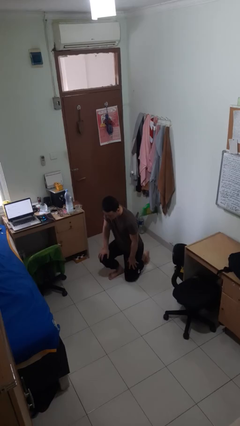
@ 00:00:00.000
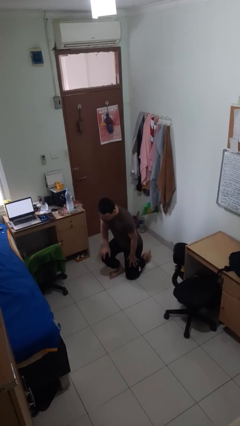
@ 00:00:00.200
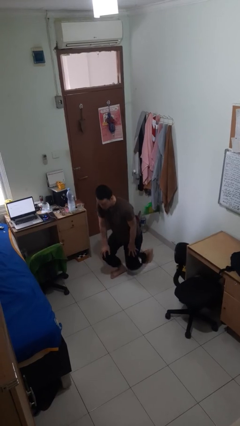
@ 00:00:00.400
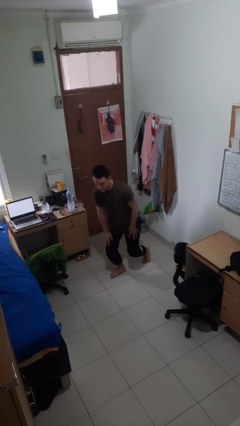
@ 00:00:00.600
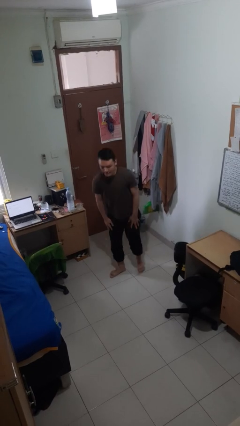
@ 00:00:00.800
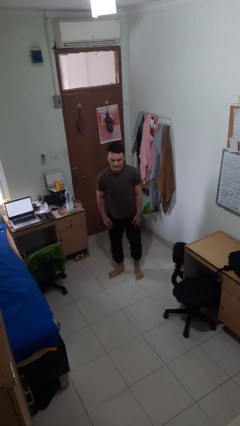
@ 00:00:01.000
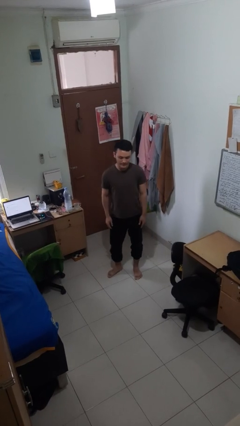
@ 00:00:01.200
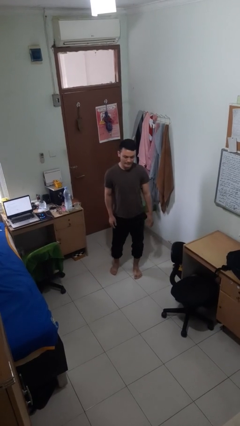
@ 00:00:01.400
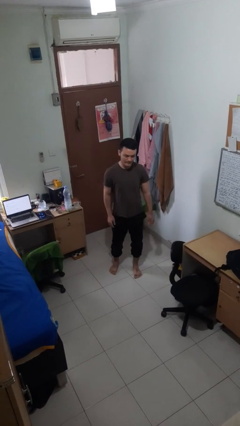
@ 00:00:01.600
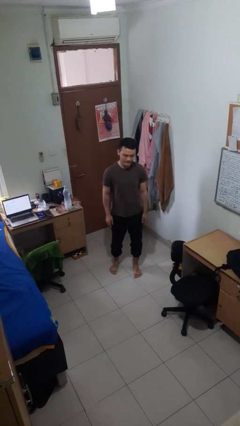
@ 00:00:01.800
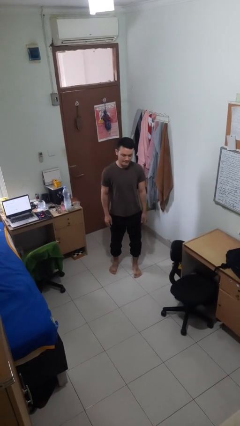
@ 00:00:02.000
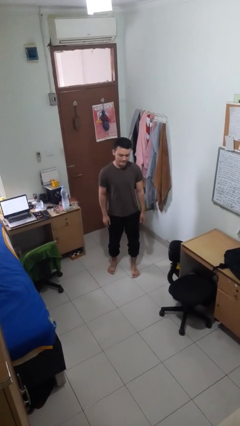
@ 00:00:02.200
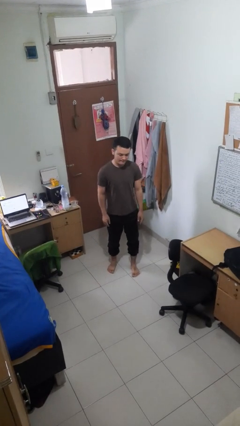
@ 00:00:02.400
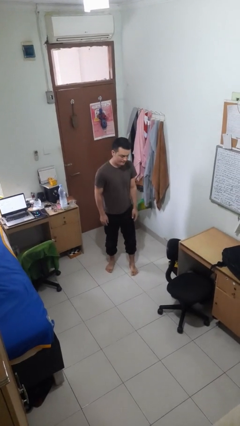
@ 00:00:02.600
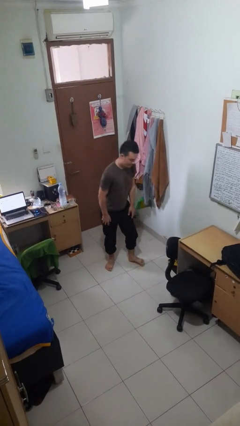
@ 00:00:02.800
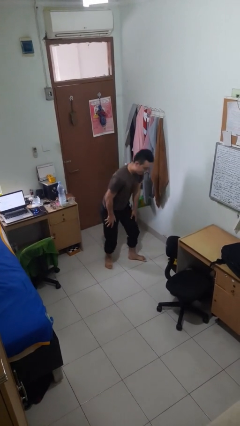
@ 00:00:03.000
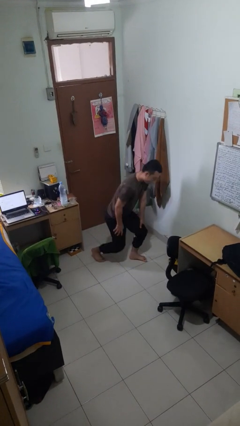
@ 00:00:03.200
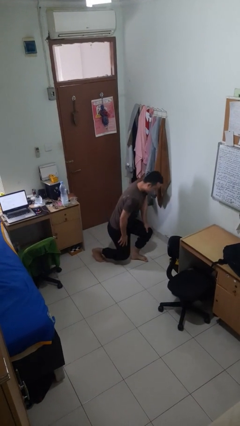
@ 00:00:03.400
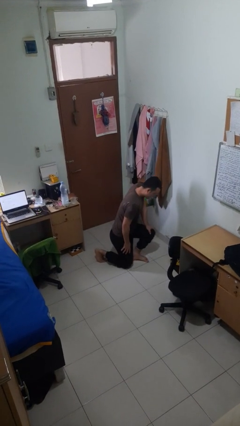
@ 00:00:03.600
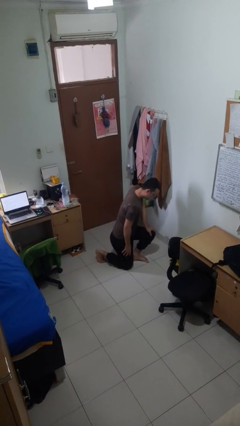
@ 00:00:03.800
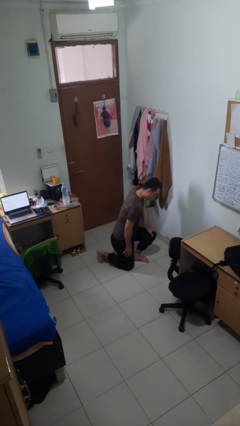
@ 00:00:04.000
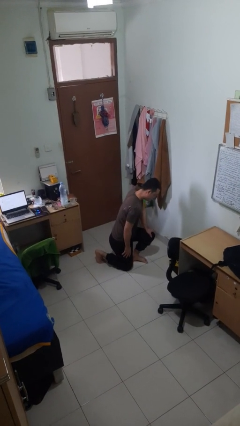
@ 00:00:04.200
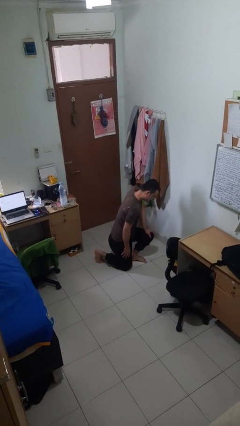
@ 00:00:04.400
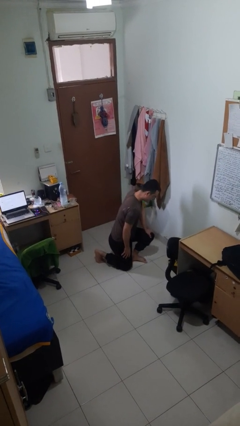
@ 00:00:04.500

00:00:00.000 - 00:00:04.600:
person stands up from floor

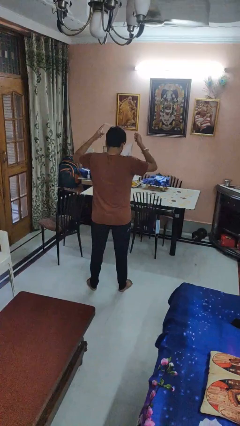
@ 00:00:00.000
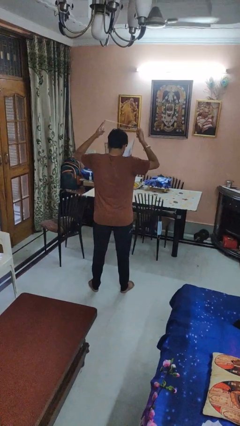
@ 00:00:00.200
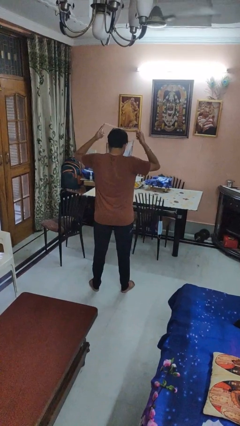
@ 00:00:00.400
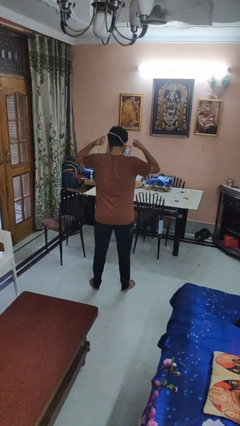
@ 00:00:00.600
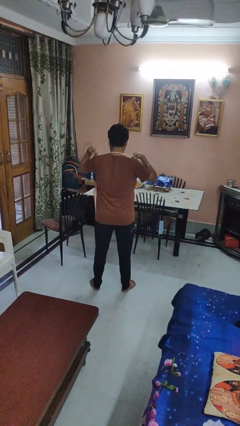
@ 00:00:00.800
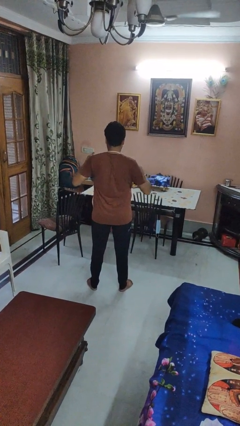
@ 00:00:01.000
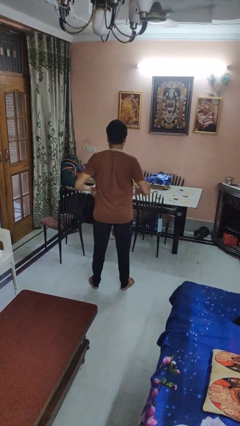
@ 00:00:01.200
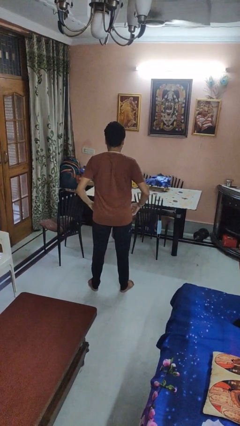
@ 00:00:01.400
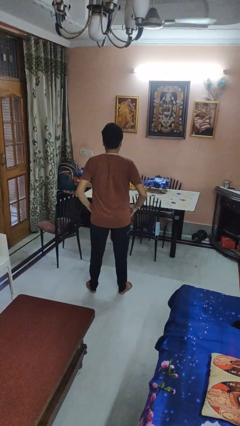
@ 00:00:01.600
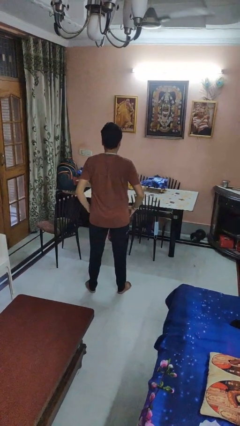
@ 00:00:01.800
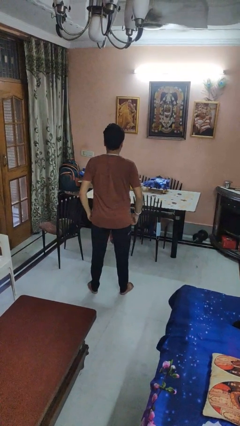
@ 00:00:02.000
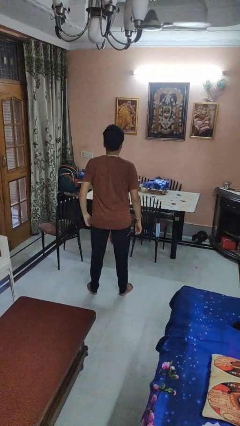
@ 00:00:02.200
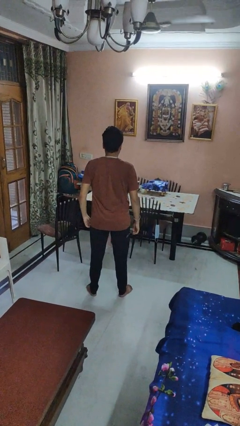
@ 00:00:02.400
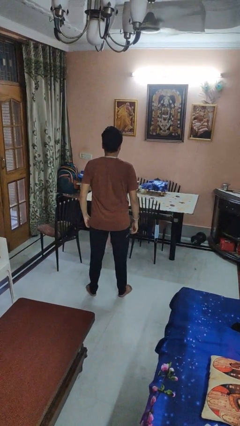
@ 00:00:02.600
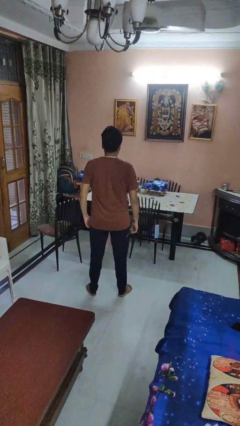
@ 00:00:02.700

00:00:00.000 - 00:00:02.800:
person puts on apron

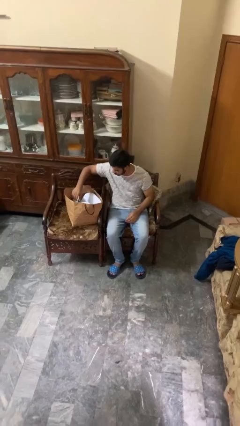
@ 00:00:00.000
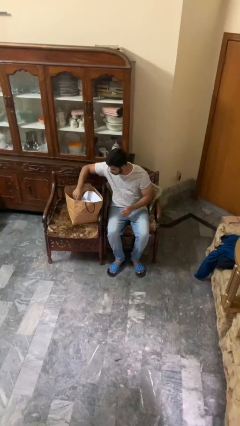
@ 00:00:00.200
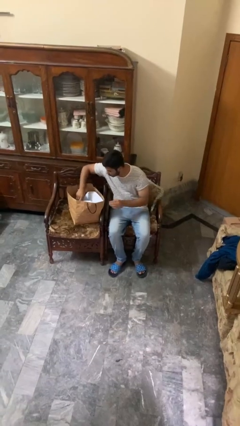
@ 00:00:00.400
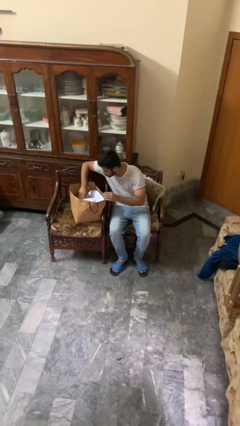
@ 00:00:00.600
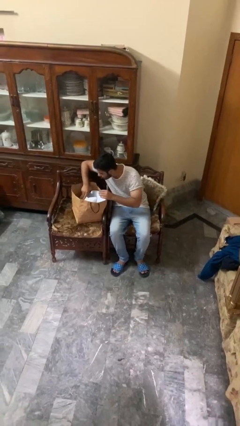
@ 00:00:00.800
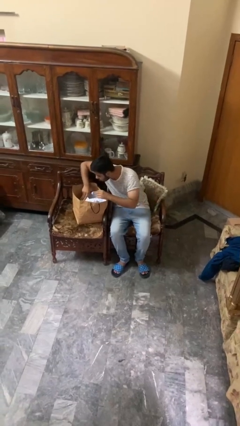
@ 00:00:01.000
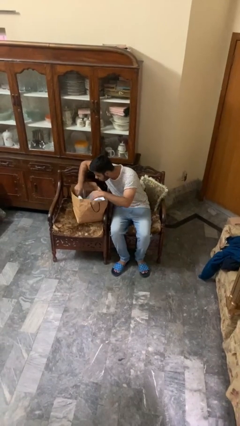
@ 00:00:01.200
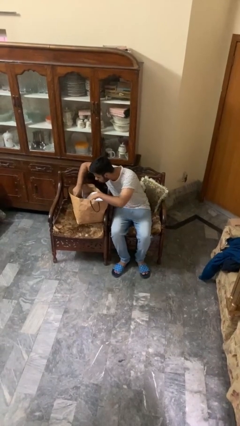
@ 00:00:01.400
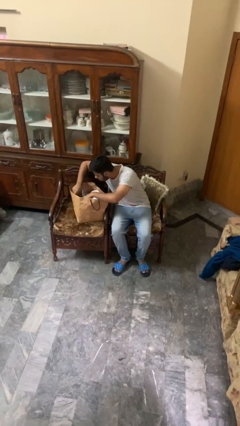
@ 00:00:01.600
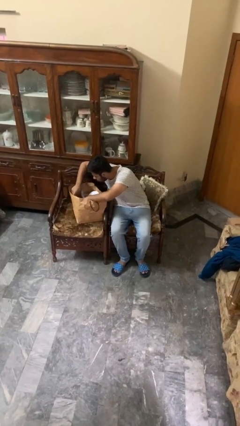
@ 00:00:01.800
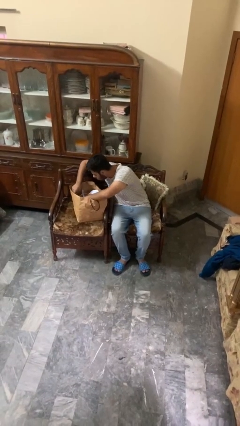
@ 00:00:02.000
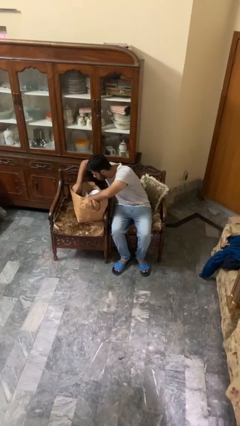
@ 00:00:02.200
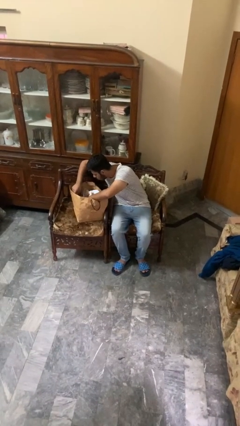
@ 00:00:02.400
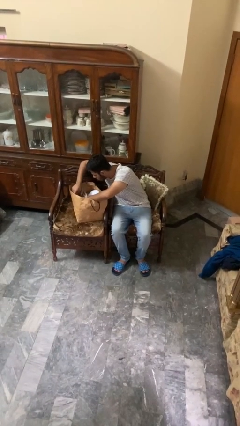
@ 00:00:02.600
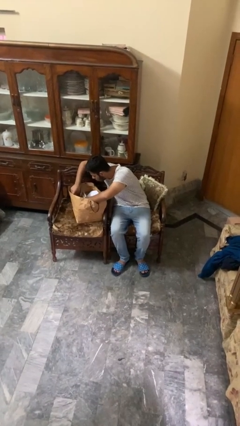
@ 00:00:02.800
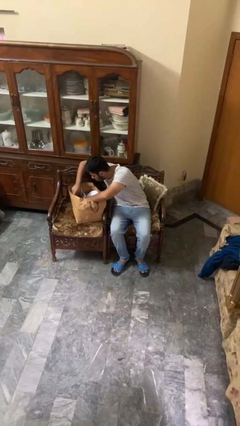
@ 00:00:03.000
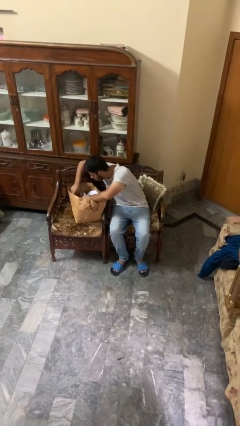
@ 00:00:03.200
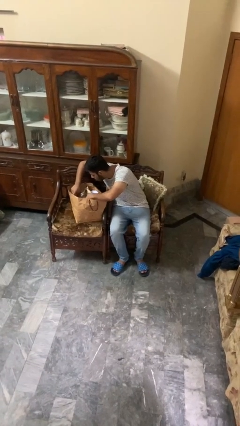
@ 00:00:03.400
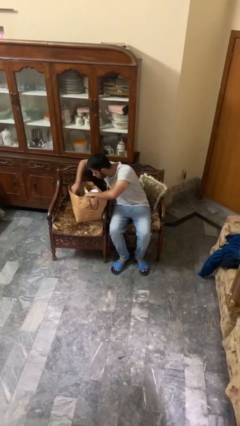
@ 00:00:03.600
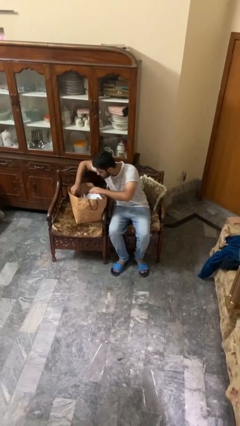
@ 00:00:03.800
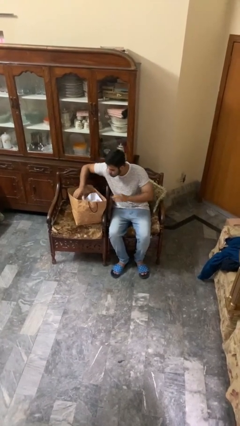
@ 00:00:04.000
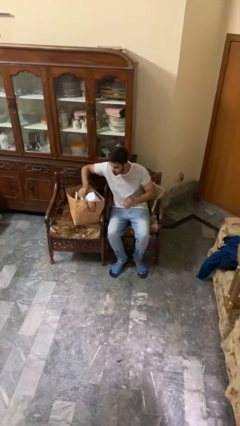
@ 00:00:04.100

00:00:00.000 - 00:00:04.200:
person searches in bag

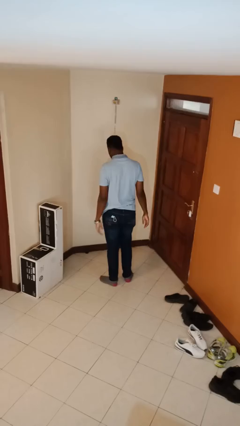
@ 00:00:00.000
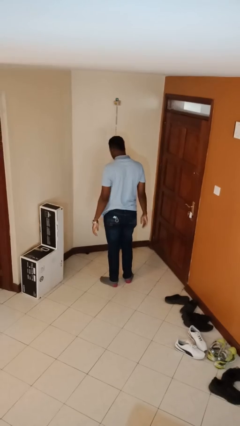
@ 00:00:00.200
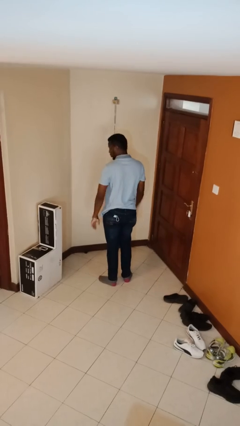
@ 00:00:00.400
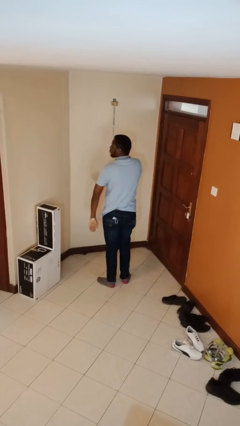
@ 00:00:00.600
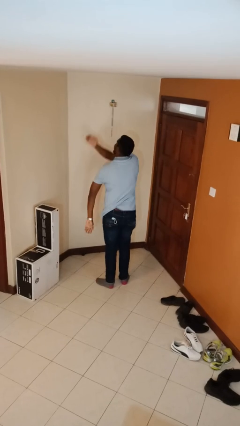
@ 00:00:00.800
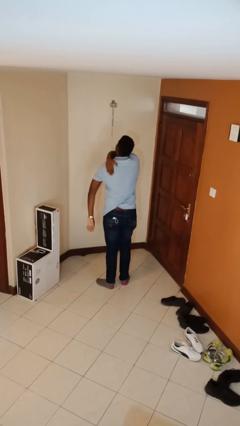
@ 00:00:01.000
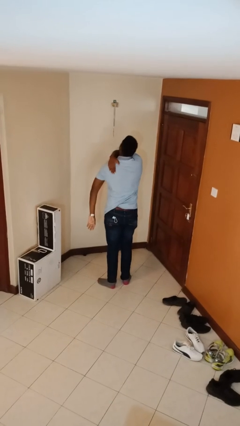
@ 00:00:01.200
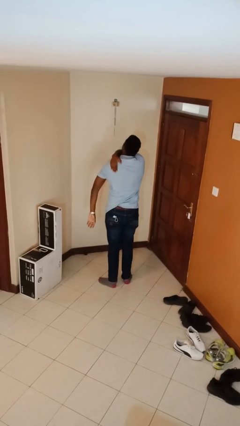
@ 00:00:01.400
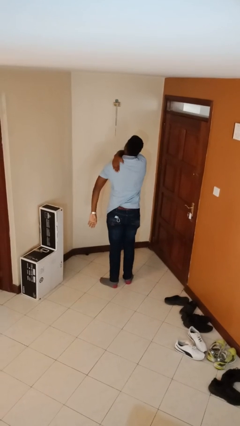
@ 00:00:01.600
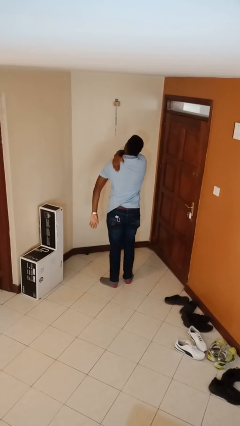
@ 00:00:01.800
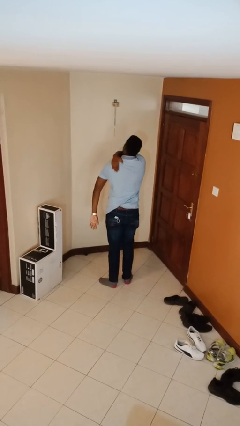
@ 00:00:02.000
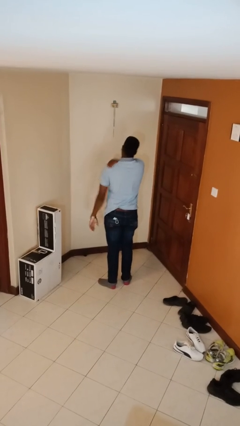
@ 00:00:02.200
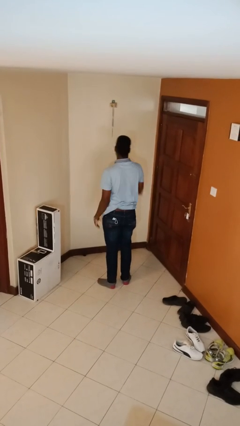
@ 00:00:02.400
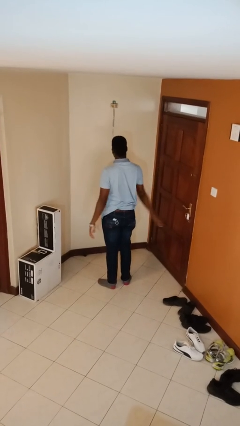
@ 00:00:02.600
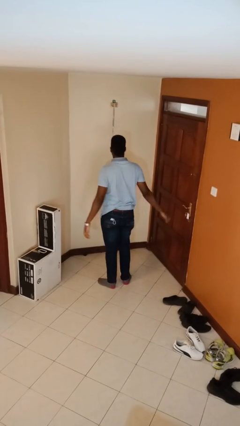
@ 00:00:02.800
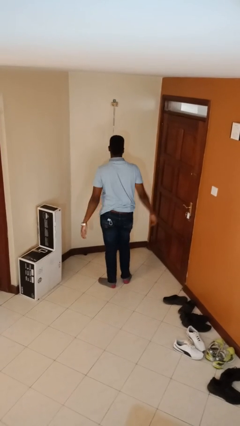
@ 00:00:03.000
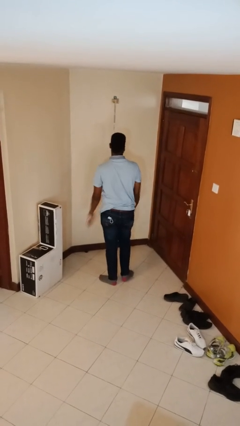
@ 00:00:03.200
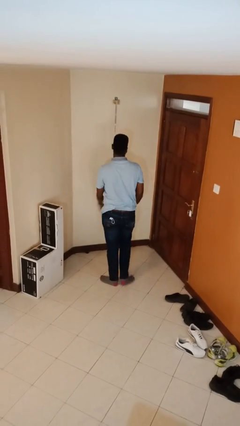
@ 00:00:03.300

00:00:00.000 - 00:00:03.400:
person swats bug

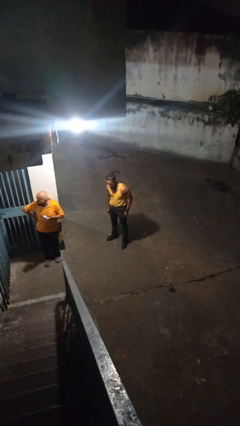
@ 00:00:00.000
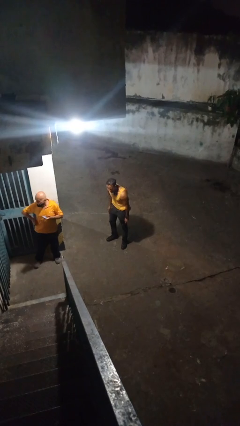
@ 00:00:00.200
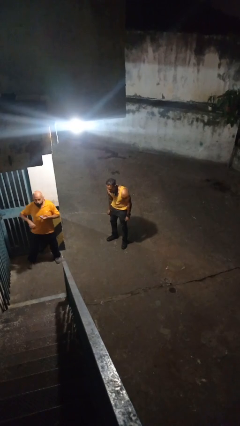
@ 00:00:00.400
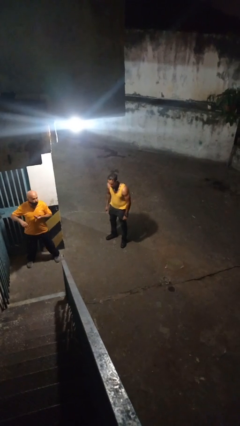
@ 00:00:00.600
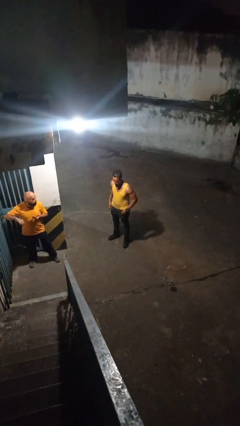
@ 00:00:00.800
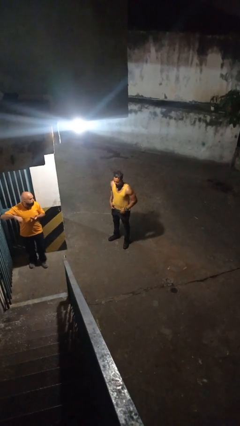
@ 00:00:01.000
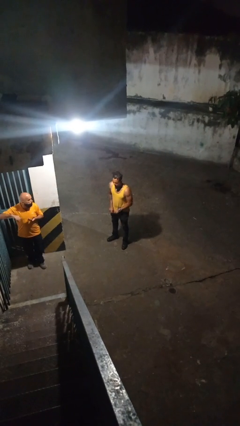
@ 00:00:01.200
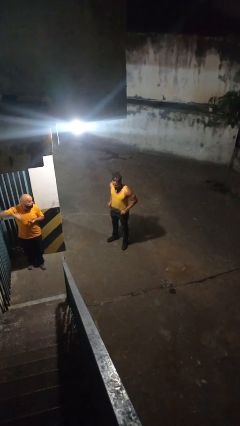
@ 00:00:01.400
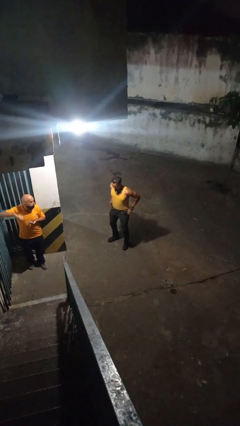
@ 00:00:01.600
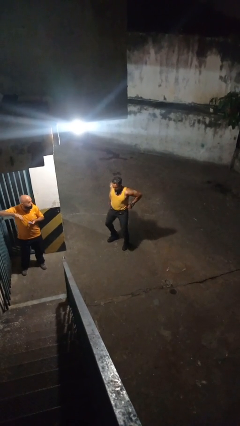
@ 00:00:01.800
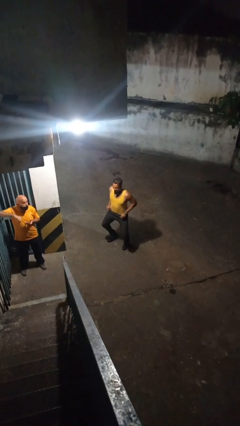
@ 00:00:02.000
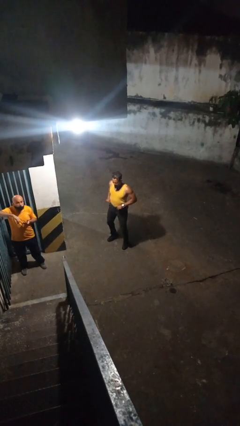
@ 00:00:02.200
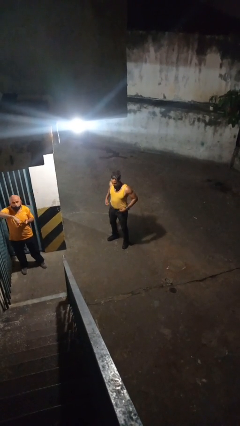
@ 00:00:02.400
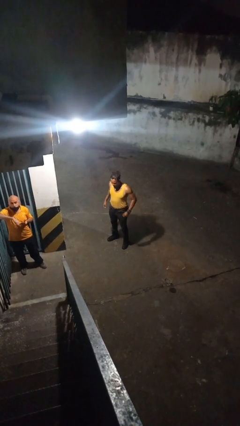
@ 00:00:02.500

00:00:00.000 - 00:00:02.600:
person hikes up pants
